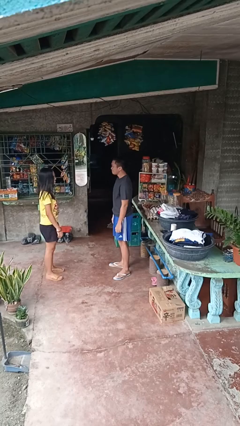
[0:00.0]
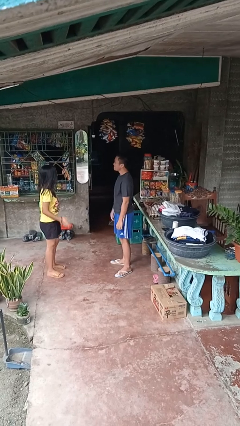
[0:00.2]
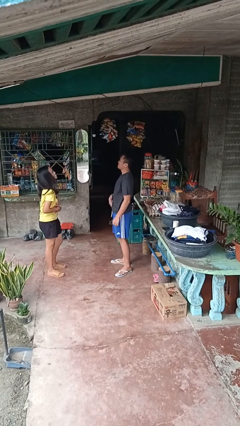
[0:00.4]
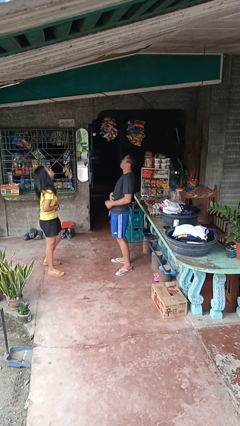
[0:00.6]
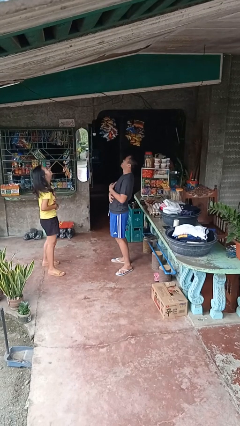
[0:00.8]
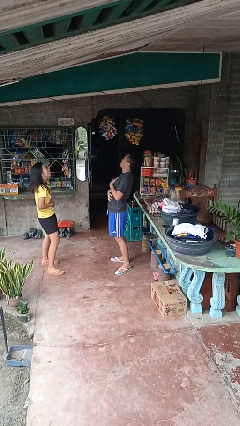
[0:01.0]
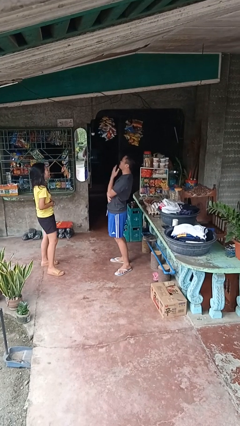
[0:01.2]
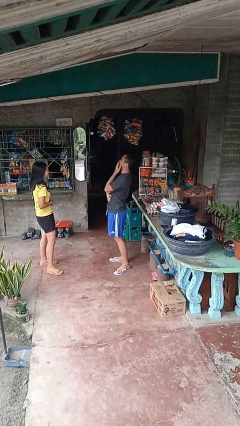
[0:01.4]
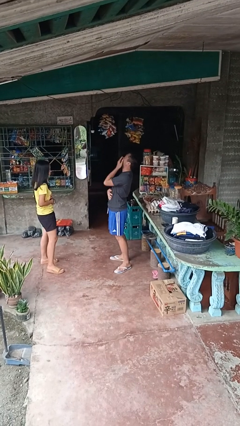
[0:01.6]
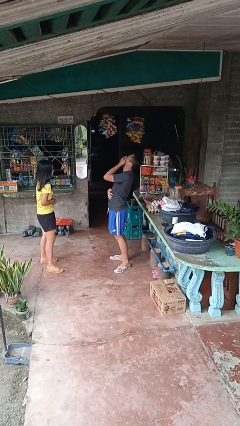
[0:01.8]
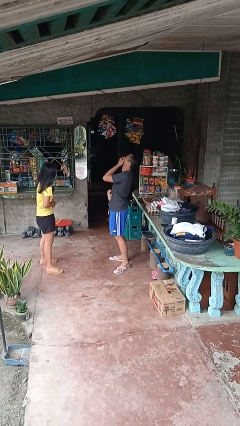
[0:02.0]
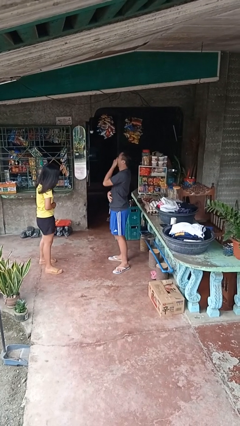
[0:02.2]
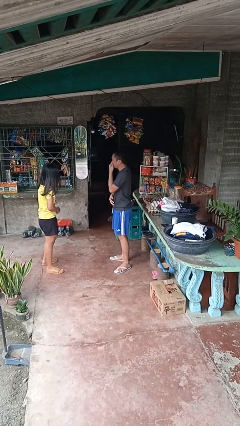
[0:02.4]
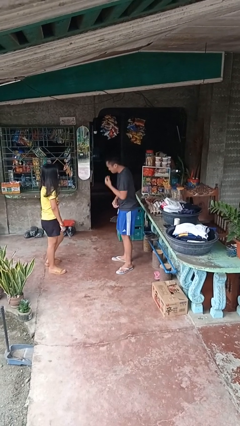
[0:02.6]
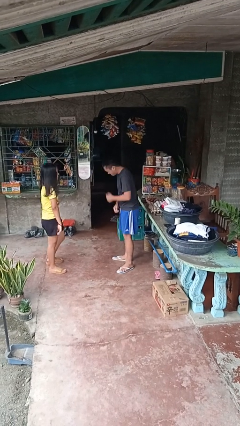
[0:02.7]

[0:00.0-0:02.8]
person laughs with person

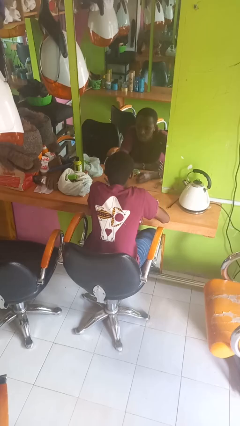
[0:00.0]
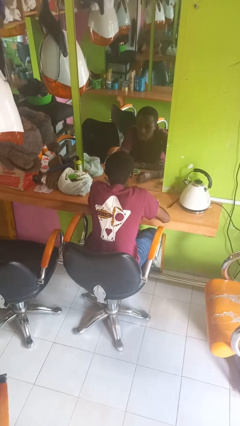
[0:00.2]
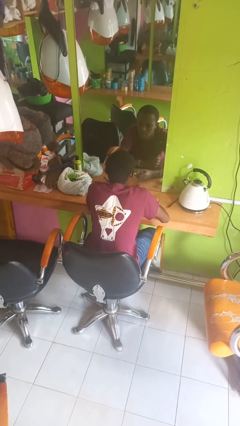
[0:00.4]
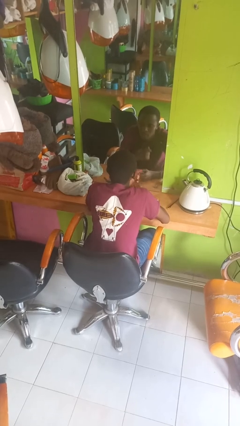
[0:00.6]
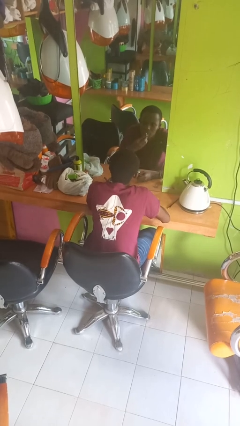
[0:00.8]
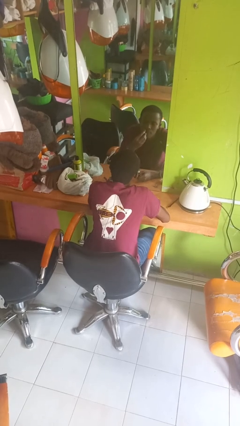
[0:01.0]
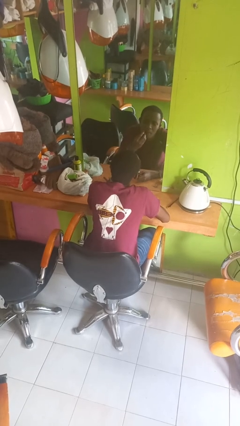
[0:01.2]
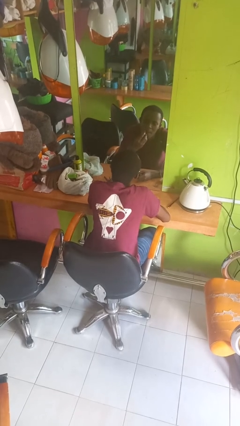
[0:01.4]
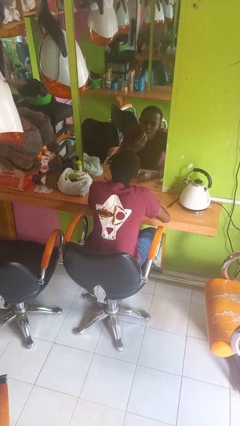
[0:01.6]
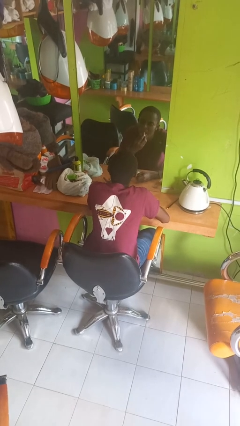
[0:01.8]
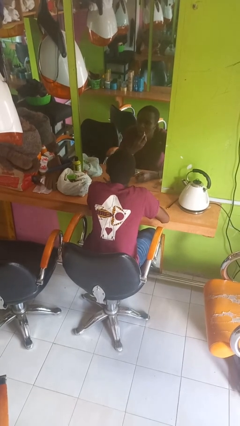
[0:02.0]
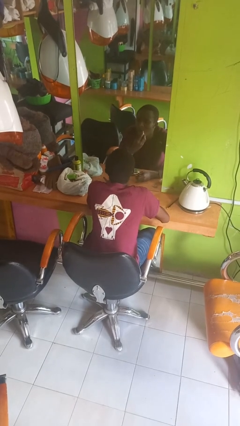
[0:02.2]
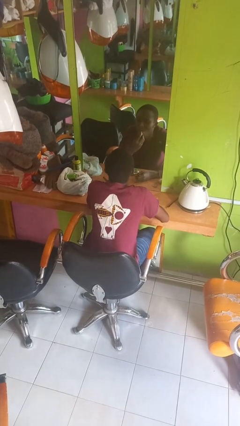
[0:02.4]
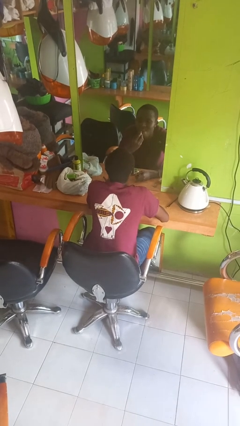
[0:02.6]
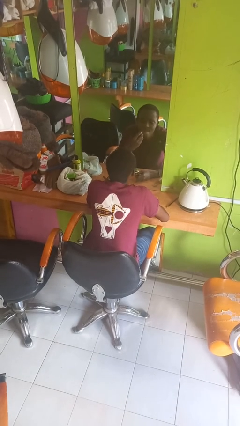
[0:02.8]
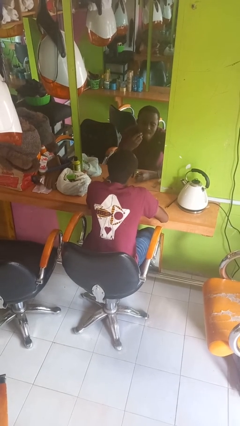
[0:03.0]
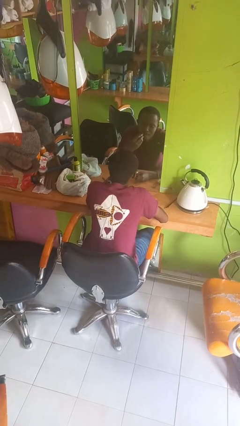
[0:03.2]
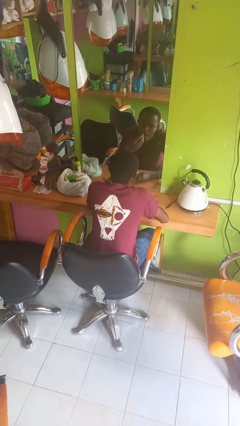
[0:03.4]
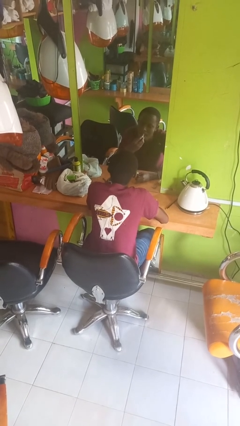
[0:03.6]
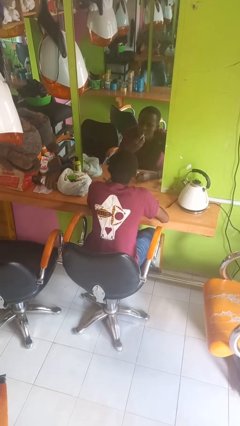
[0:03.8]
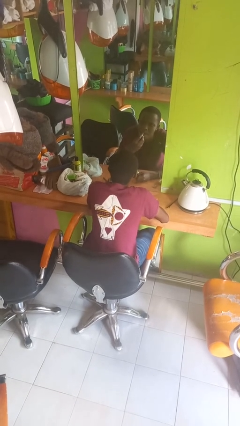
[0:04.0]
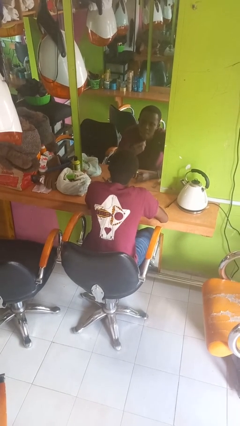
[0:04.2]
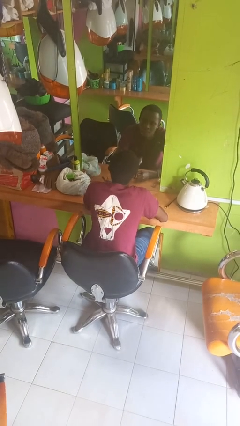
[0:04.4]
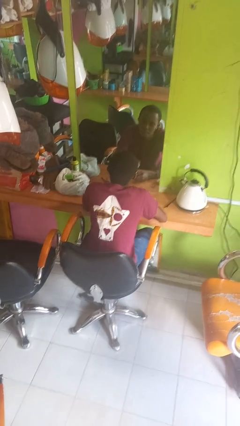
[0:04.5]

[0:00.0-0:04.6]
person applies lip makeup

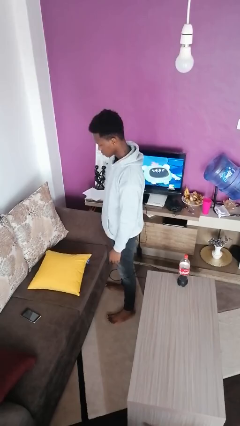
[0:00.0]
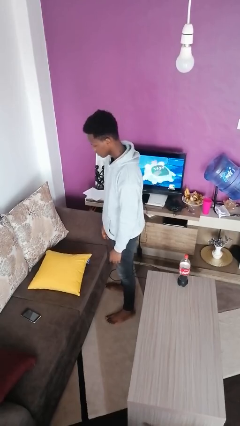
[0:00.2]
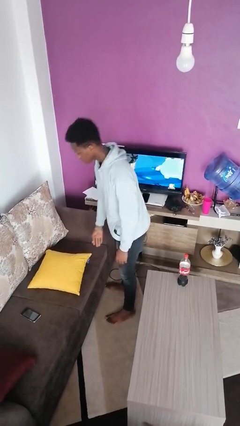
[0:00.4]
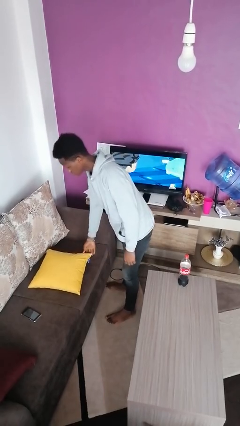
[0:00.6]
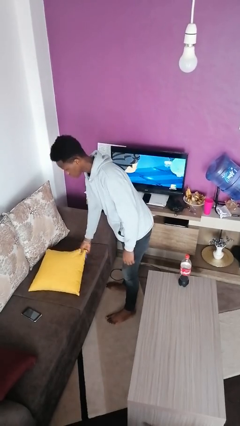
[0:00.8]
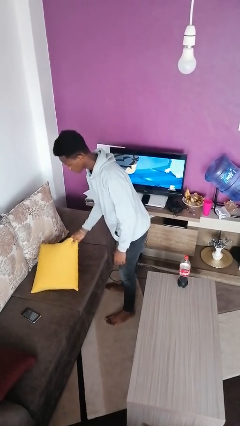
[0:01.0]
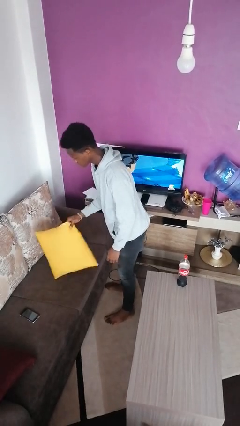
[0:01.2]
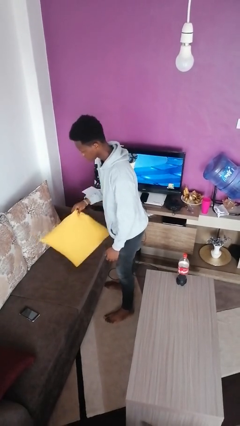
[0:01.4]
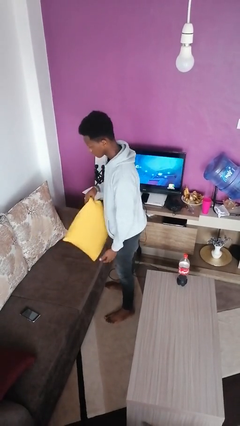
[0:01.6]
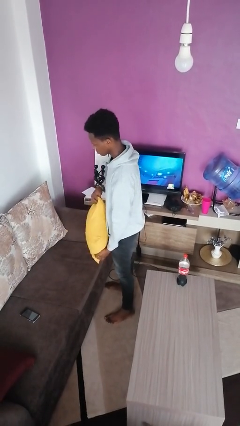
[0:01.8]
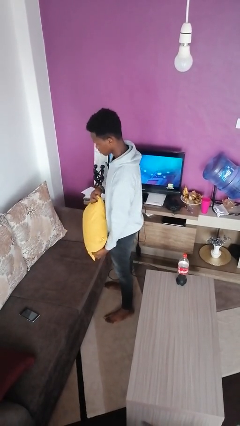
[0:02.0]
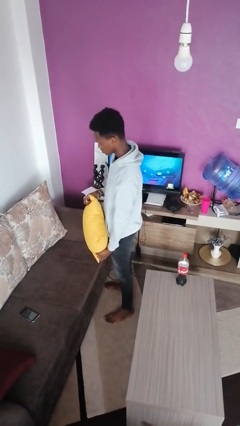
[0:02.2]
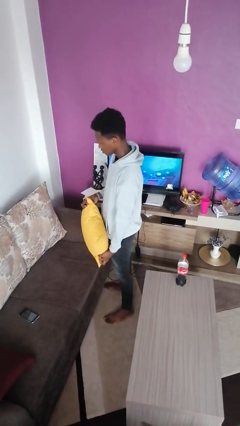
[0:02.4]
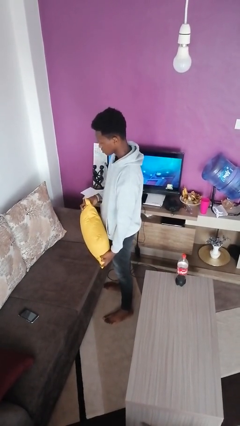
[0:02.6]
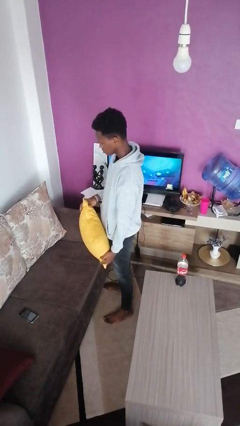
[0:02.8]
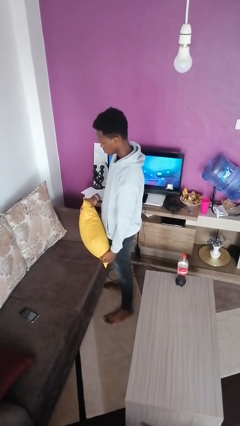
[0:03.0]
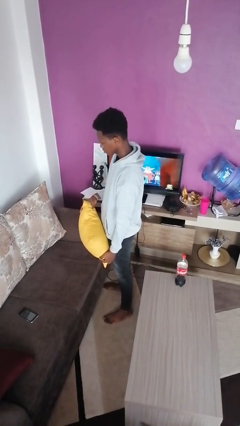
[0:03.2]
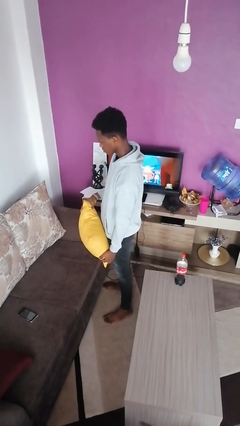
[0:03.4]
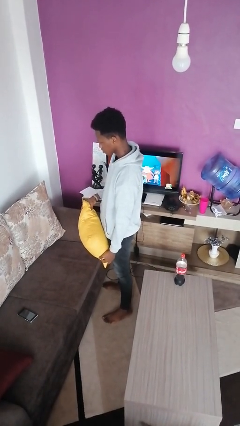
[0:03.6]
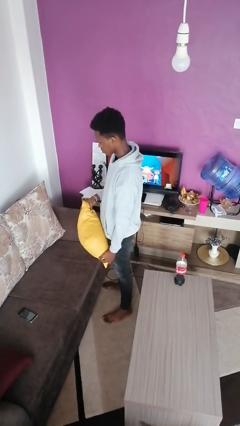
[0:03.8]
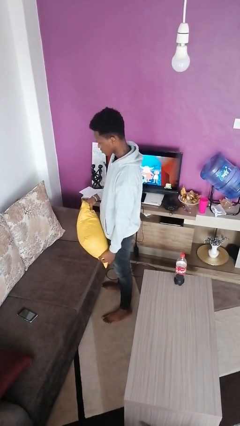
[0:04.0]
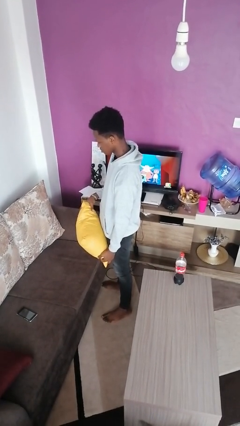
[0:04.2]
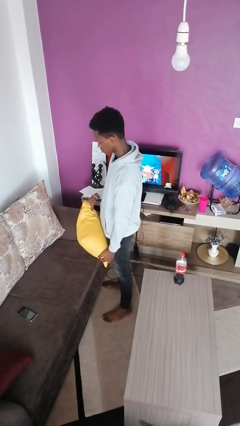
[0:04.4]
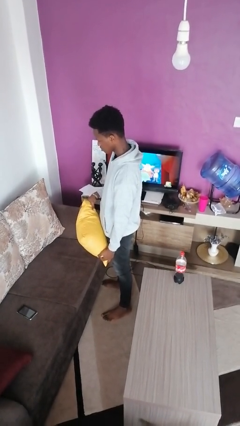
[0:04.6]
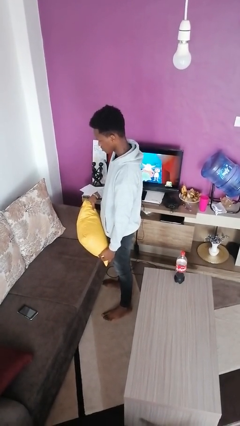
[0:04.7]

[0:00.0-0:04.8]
person picks up object from couch

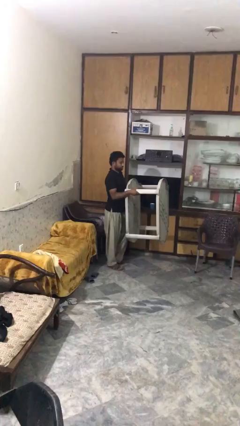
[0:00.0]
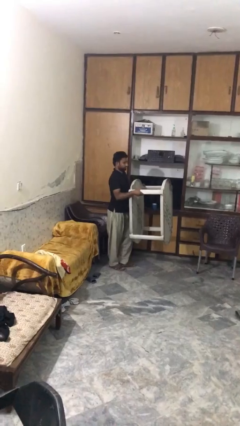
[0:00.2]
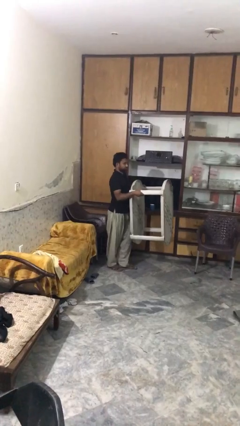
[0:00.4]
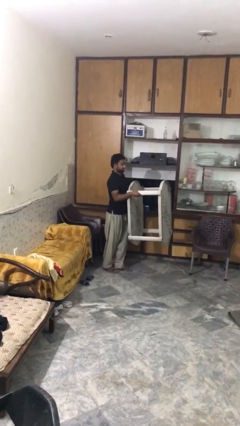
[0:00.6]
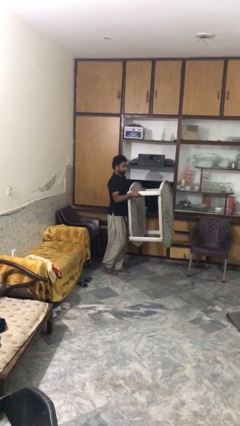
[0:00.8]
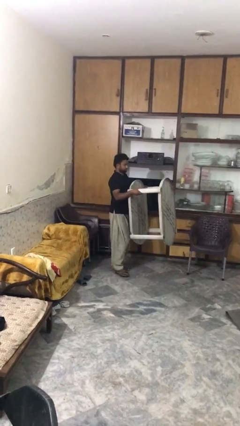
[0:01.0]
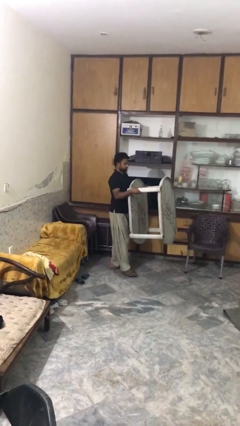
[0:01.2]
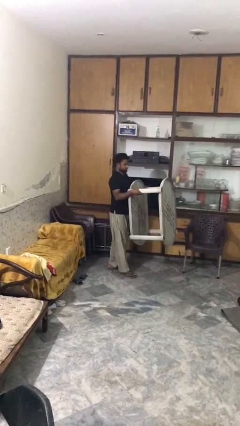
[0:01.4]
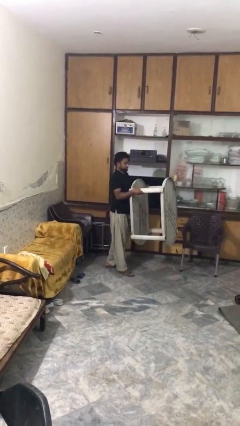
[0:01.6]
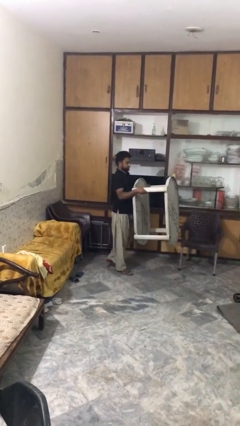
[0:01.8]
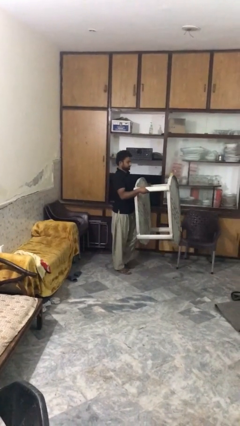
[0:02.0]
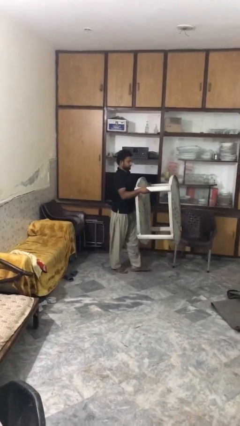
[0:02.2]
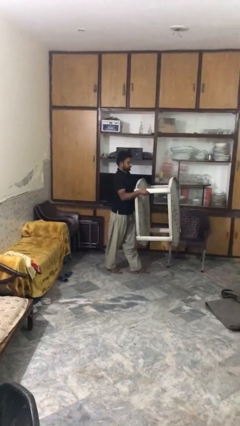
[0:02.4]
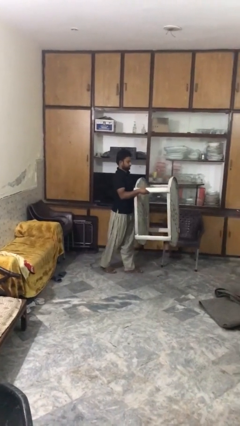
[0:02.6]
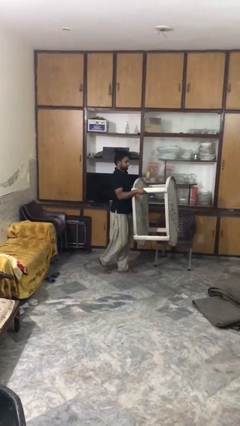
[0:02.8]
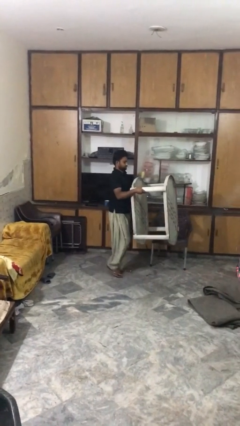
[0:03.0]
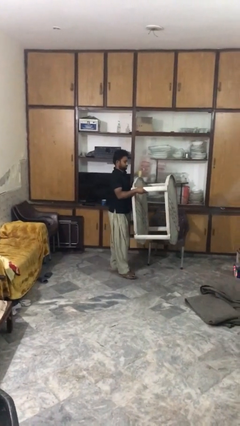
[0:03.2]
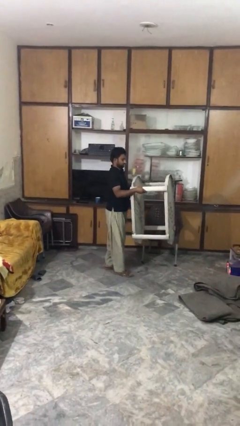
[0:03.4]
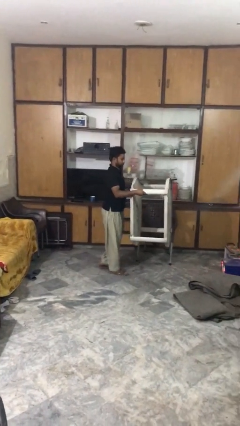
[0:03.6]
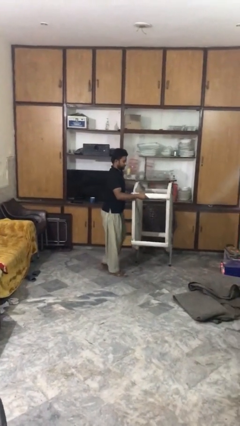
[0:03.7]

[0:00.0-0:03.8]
person carries heavy object

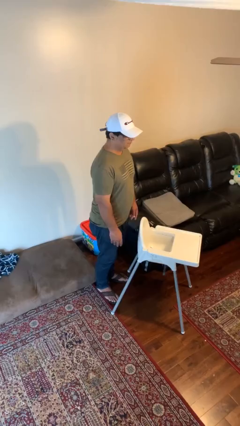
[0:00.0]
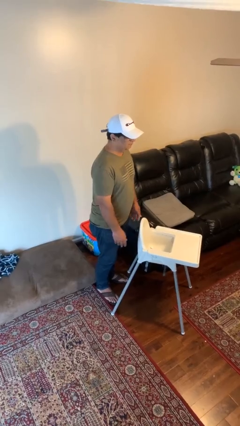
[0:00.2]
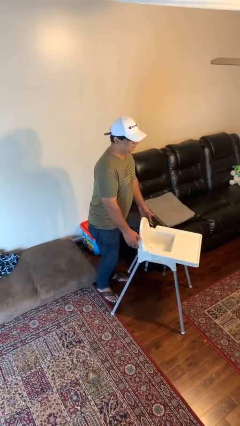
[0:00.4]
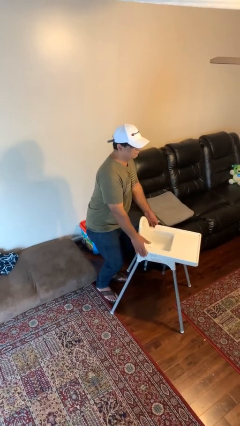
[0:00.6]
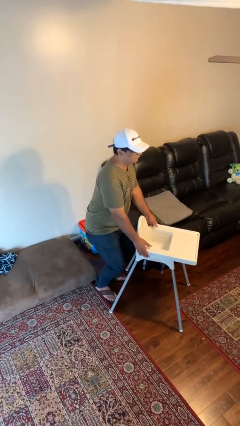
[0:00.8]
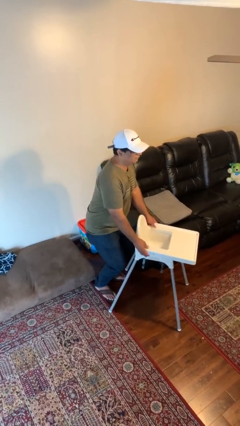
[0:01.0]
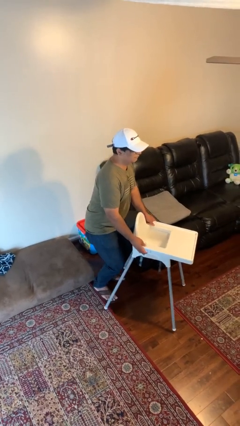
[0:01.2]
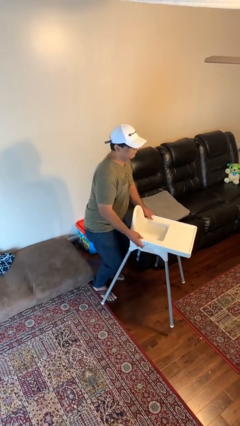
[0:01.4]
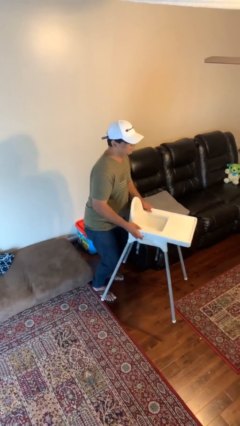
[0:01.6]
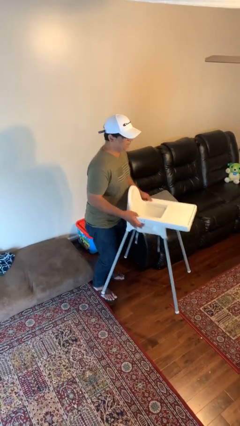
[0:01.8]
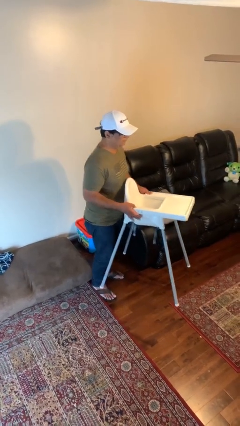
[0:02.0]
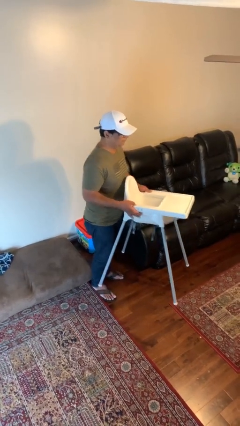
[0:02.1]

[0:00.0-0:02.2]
person picks up object from floor
